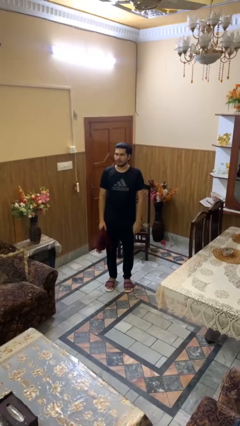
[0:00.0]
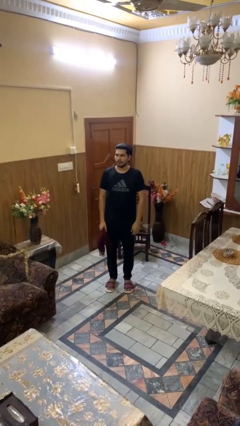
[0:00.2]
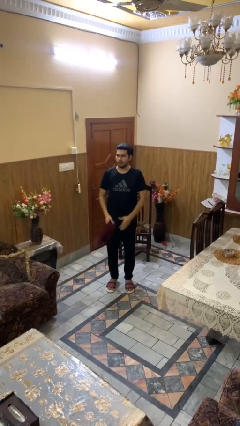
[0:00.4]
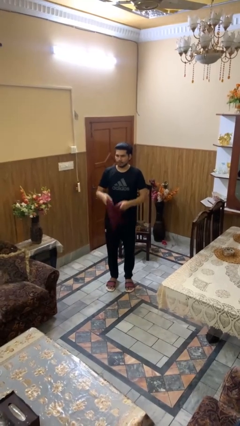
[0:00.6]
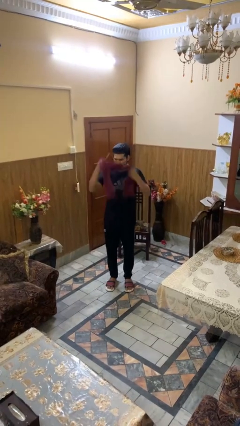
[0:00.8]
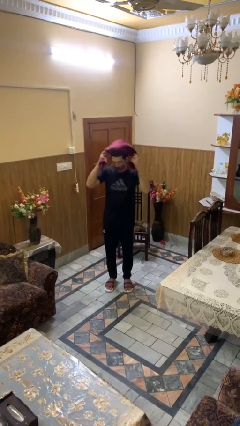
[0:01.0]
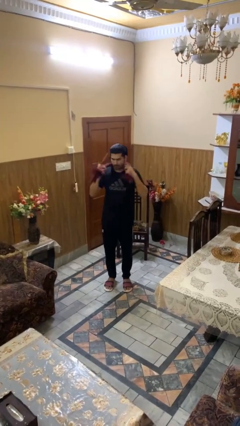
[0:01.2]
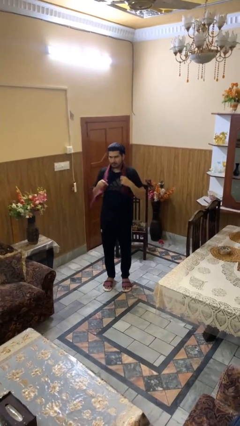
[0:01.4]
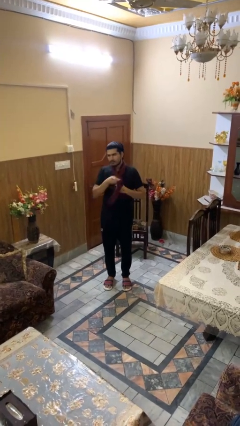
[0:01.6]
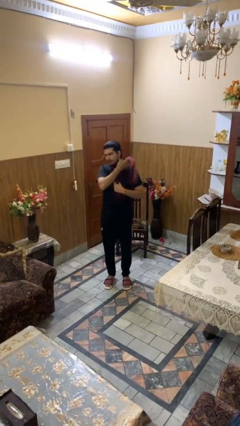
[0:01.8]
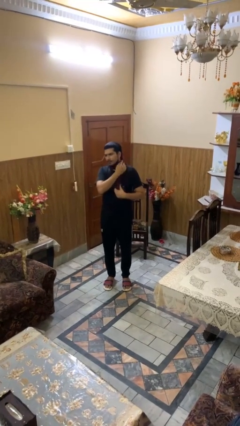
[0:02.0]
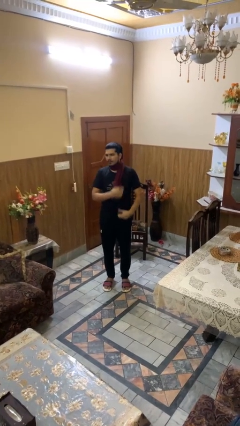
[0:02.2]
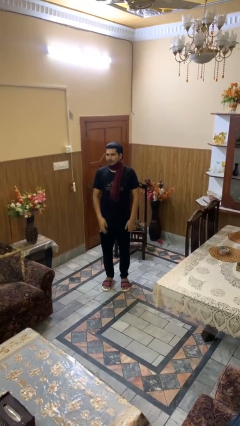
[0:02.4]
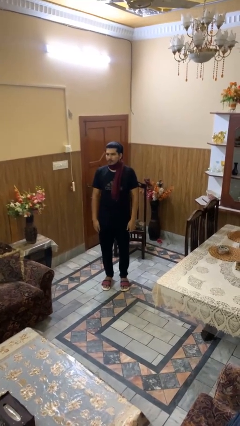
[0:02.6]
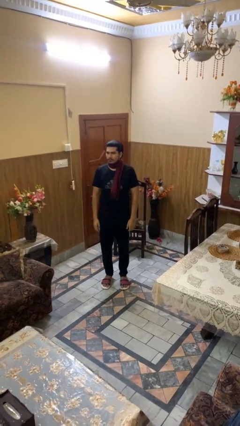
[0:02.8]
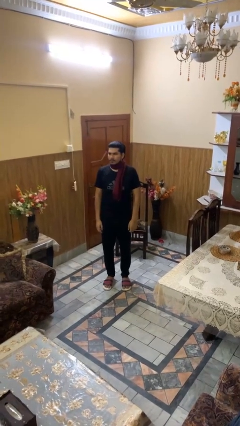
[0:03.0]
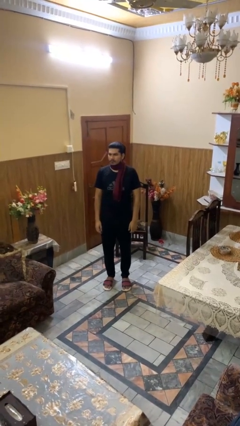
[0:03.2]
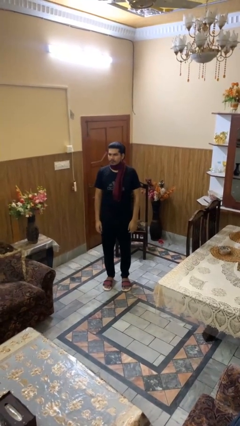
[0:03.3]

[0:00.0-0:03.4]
person puts on scarf

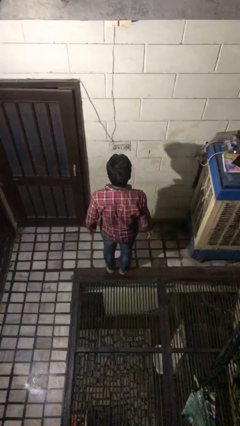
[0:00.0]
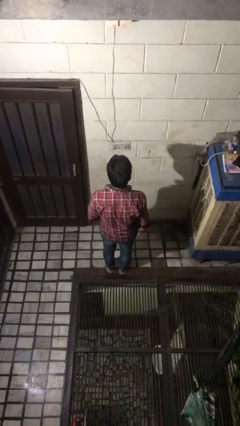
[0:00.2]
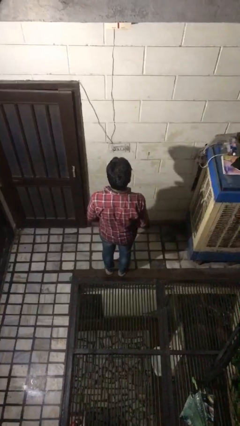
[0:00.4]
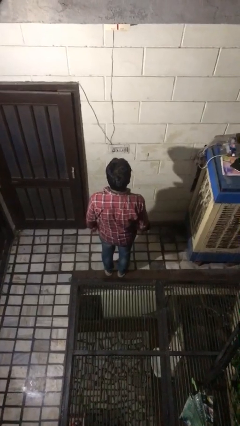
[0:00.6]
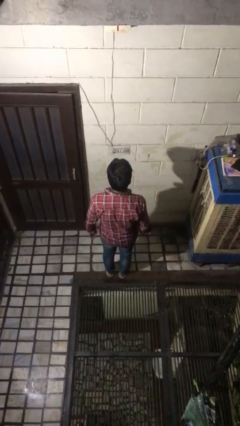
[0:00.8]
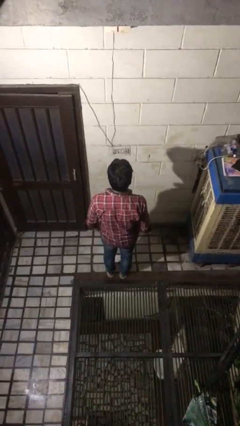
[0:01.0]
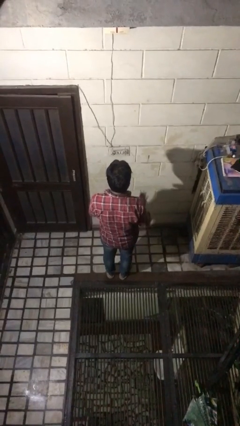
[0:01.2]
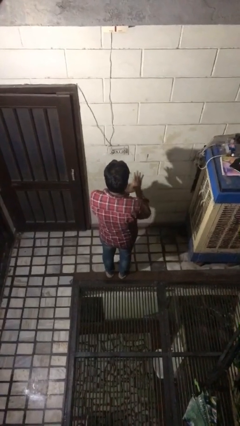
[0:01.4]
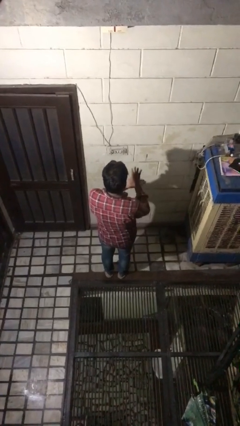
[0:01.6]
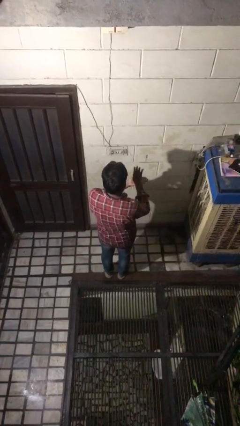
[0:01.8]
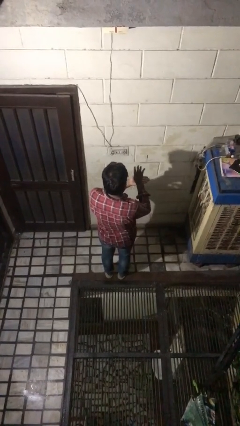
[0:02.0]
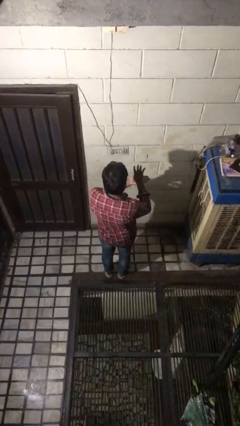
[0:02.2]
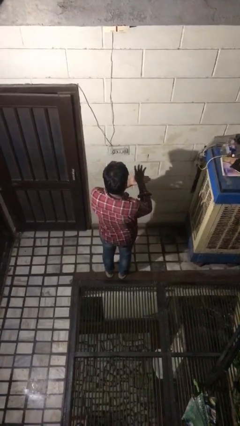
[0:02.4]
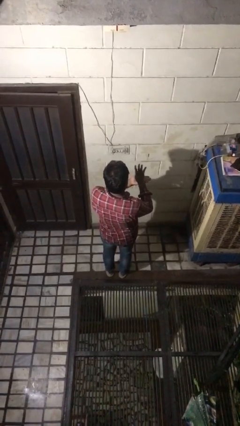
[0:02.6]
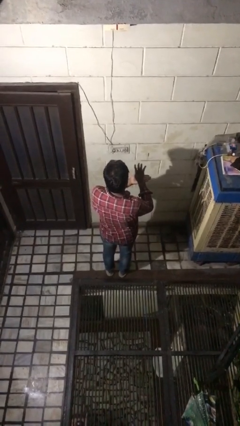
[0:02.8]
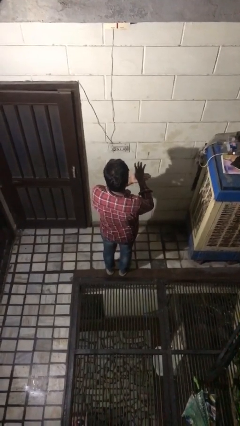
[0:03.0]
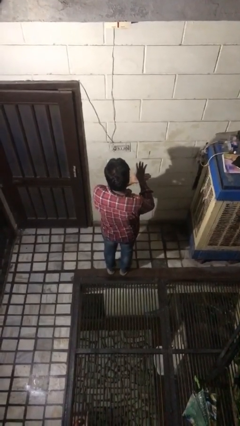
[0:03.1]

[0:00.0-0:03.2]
person gestures number four

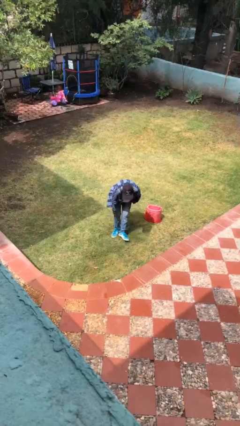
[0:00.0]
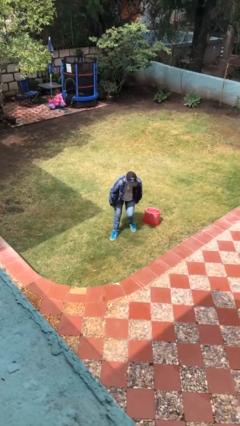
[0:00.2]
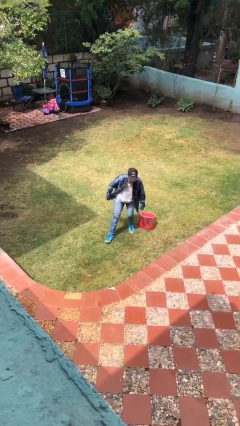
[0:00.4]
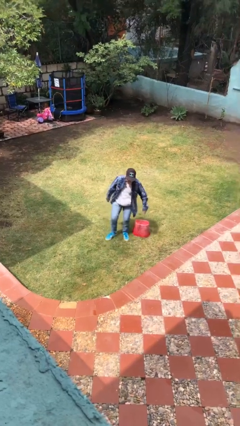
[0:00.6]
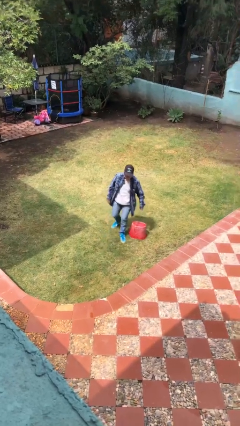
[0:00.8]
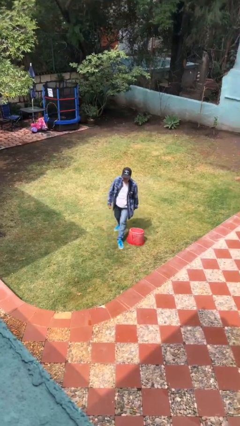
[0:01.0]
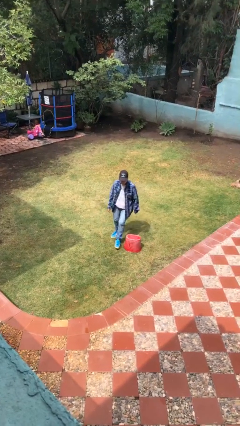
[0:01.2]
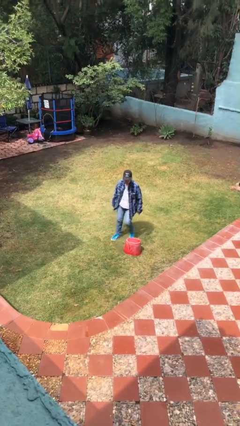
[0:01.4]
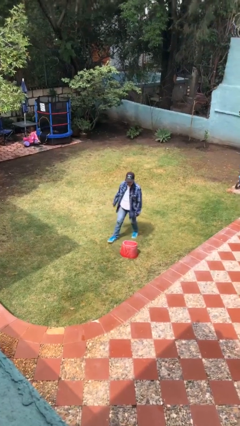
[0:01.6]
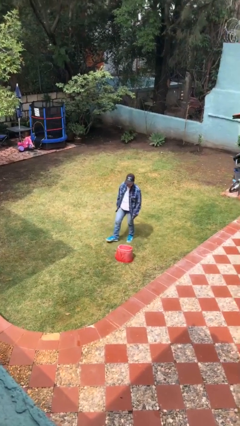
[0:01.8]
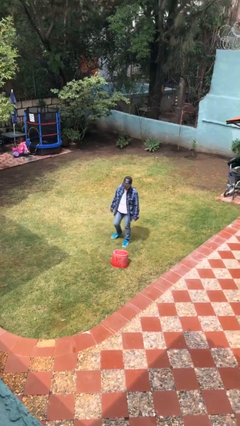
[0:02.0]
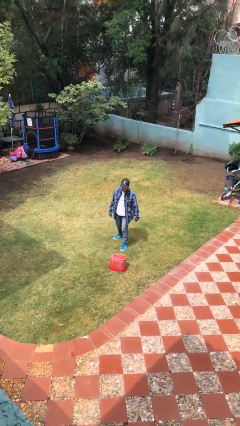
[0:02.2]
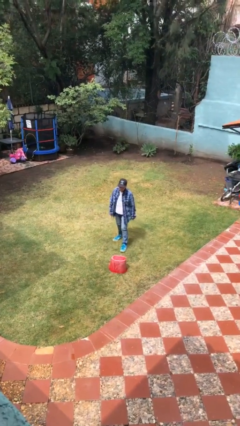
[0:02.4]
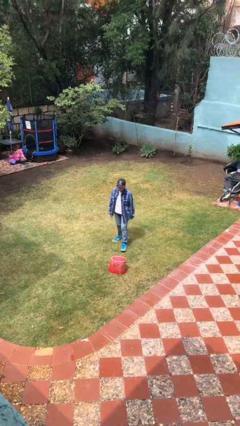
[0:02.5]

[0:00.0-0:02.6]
person stands up from floor

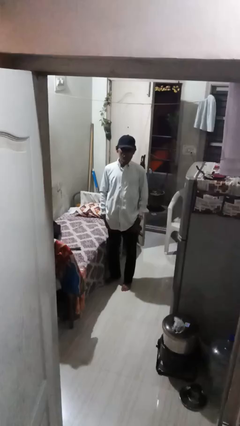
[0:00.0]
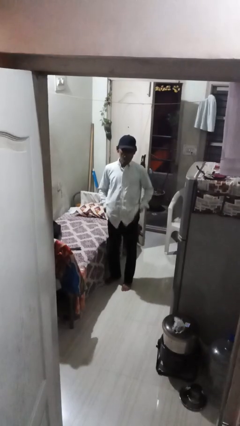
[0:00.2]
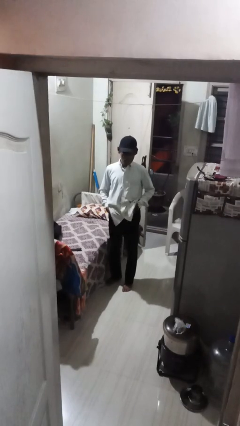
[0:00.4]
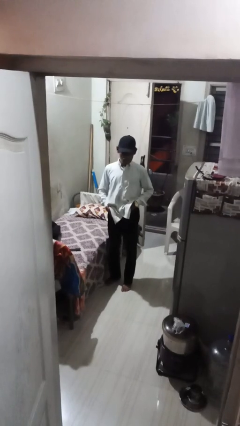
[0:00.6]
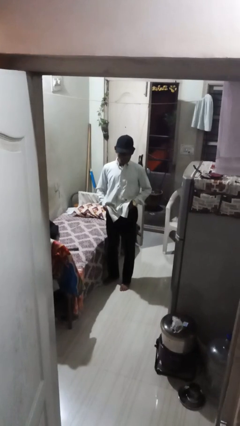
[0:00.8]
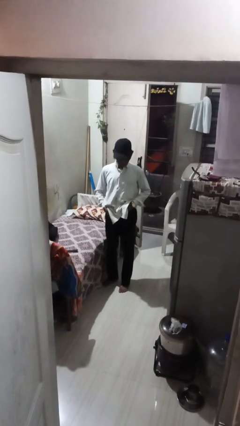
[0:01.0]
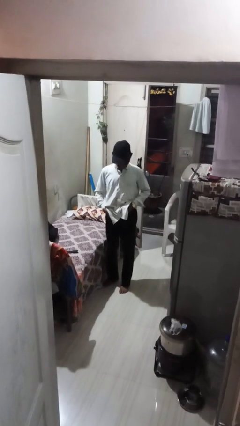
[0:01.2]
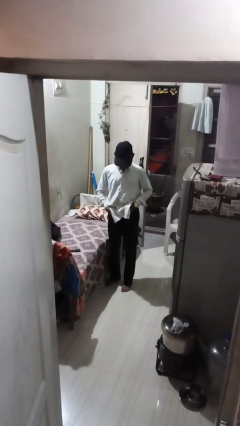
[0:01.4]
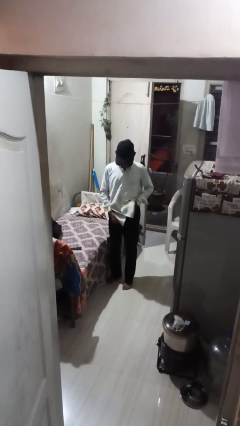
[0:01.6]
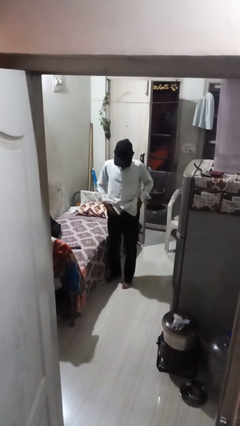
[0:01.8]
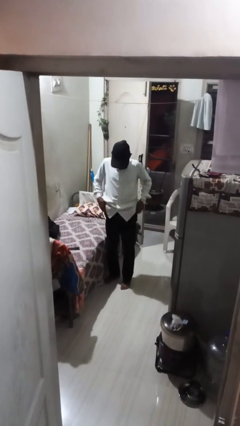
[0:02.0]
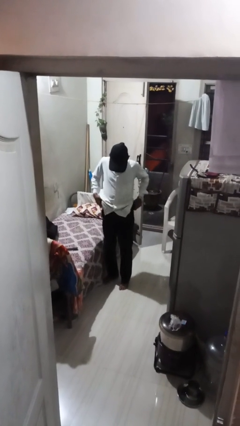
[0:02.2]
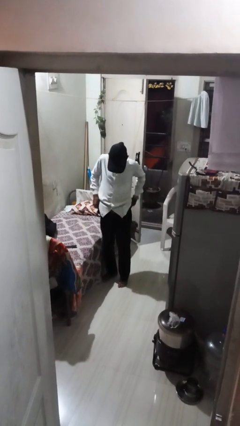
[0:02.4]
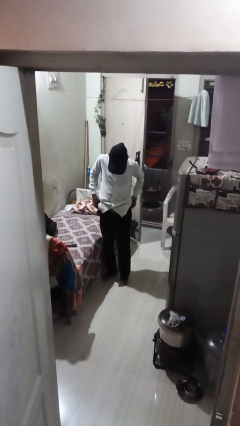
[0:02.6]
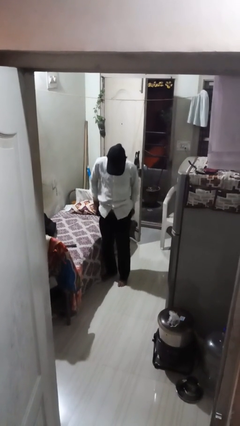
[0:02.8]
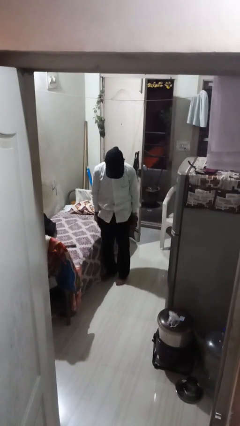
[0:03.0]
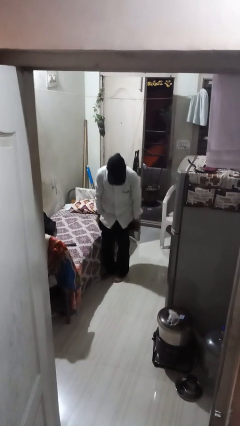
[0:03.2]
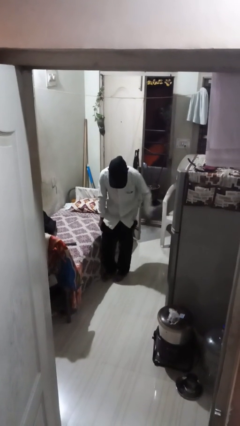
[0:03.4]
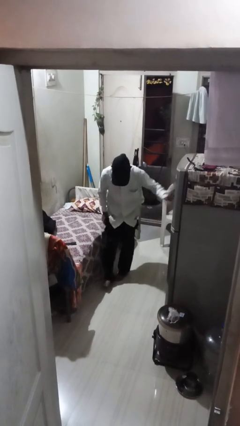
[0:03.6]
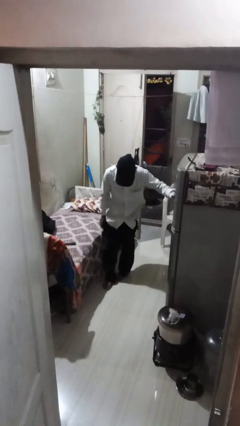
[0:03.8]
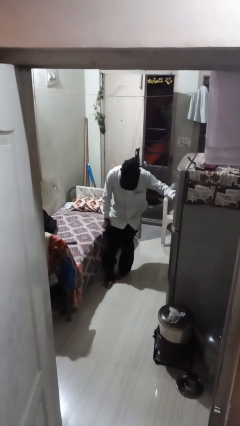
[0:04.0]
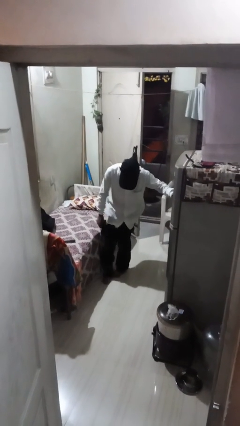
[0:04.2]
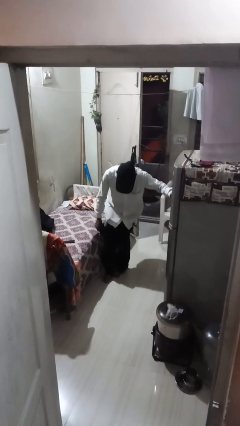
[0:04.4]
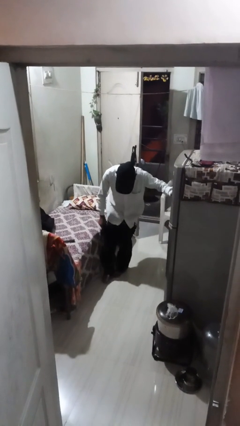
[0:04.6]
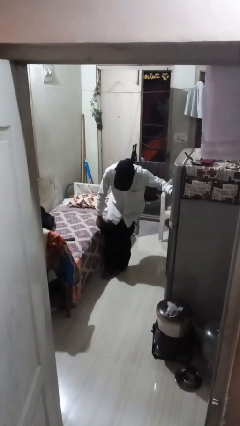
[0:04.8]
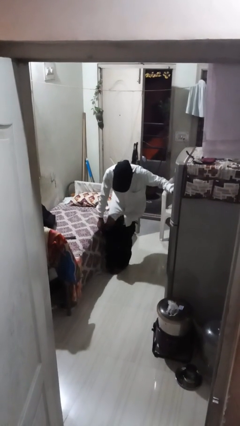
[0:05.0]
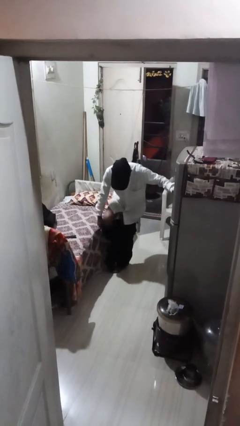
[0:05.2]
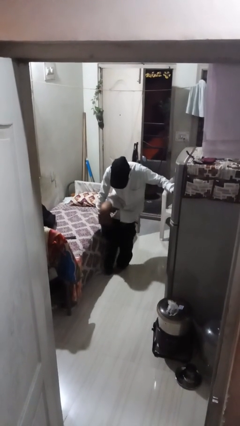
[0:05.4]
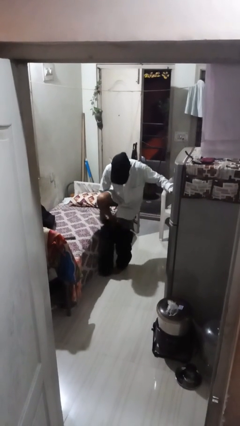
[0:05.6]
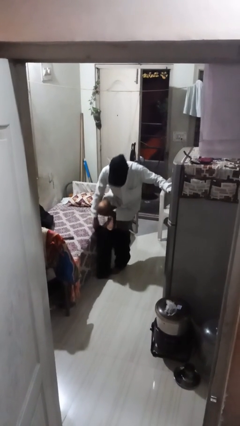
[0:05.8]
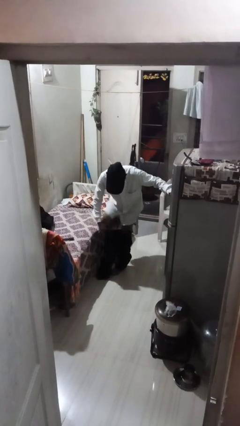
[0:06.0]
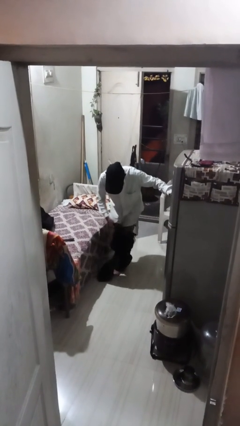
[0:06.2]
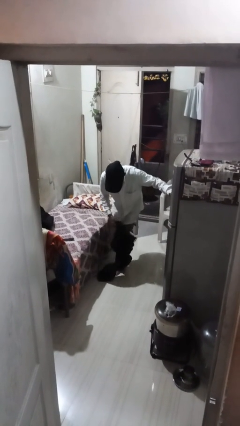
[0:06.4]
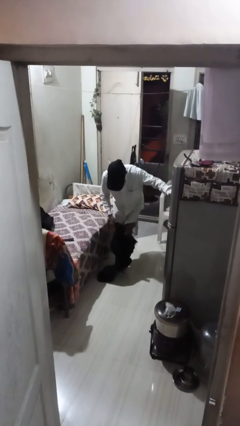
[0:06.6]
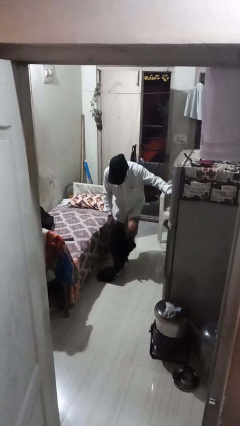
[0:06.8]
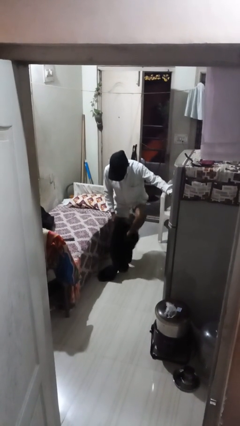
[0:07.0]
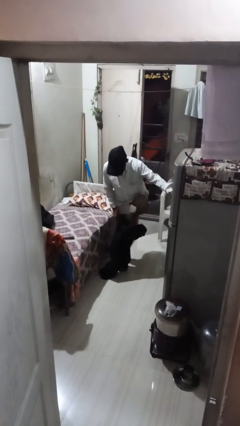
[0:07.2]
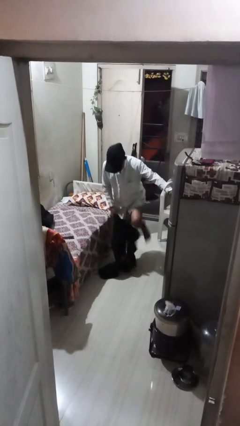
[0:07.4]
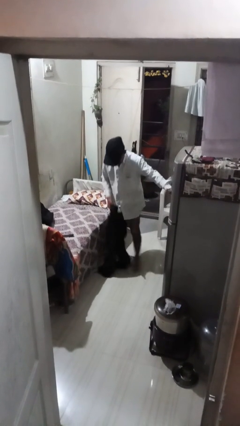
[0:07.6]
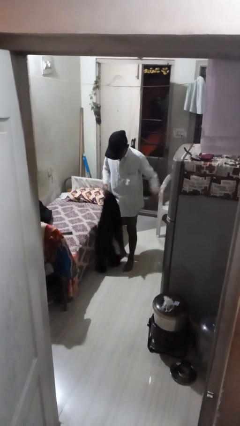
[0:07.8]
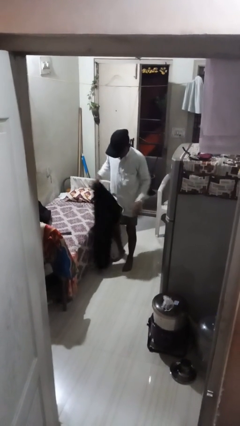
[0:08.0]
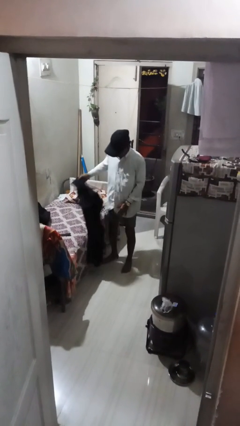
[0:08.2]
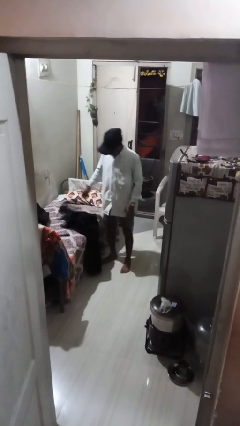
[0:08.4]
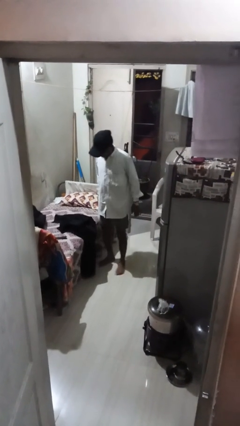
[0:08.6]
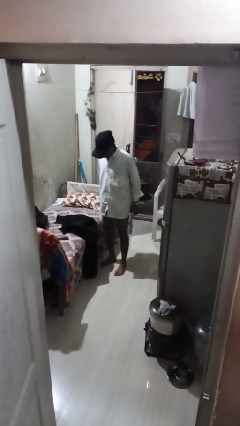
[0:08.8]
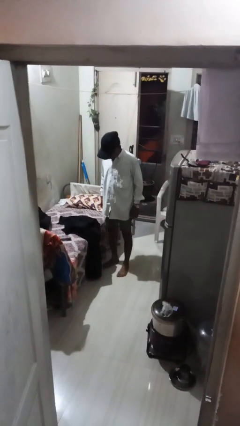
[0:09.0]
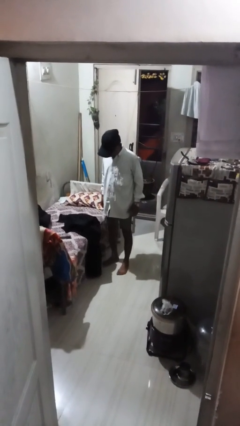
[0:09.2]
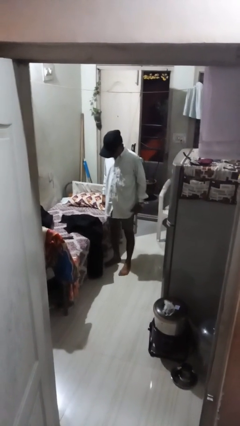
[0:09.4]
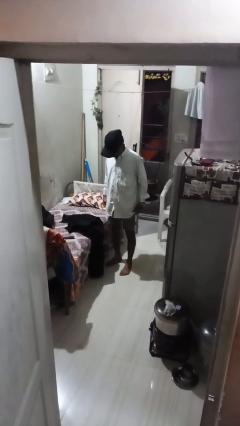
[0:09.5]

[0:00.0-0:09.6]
person takes off pants
